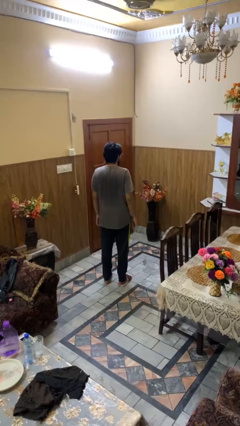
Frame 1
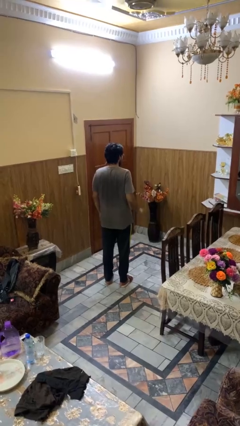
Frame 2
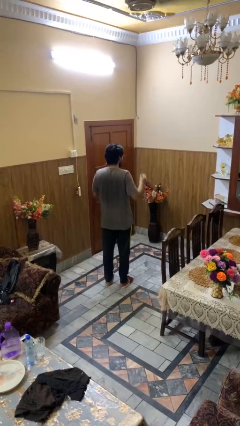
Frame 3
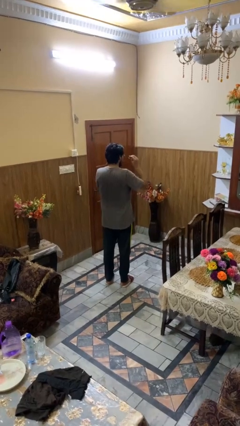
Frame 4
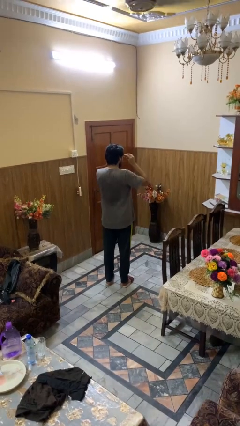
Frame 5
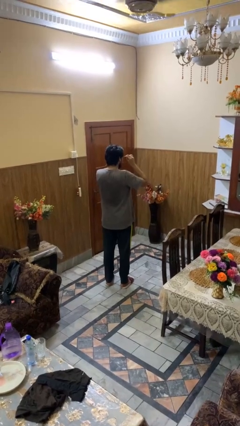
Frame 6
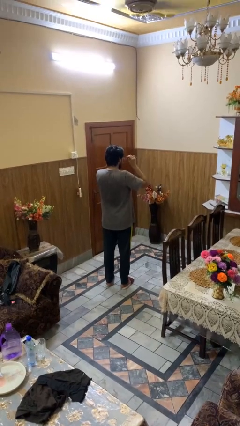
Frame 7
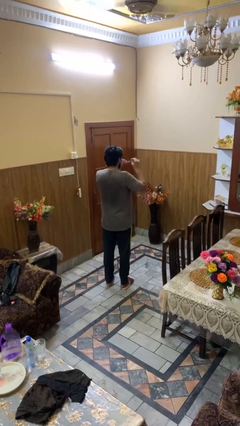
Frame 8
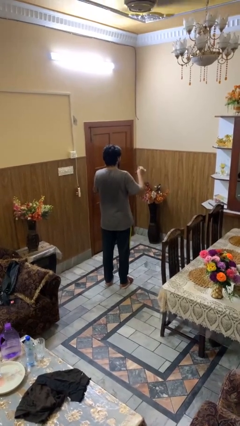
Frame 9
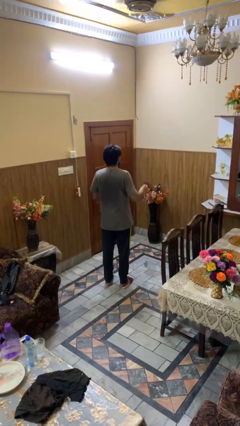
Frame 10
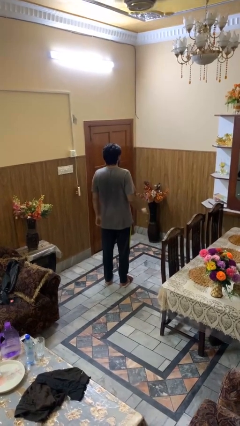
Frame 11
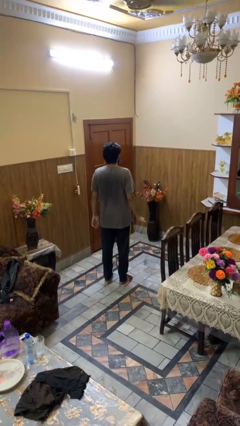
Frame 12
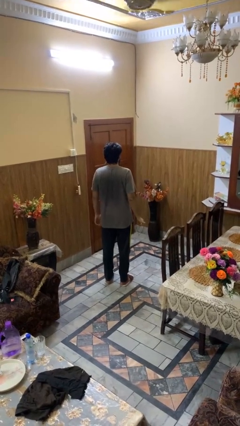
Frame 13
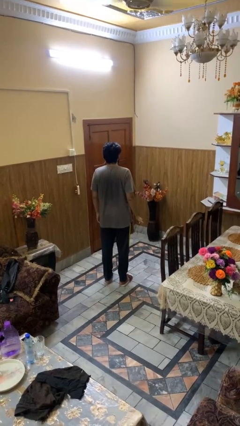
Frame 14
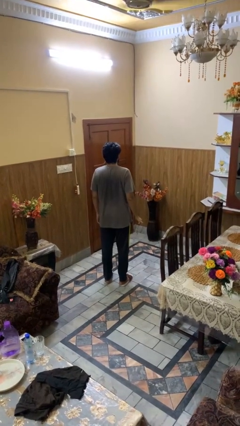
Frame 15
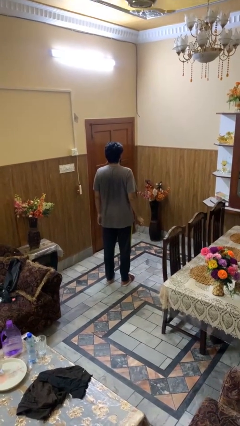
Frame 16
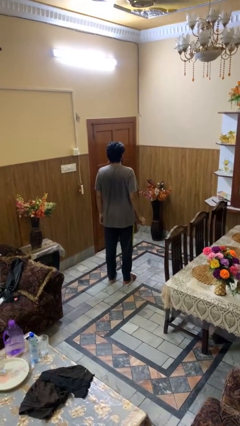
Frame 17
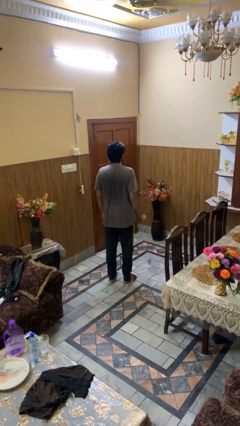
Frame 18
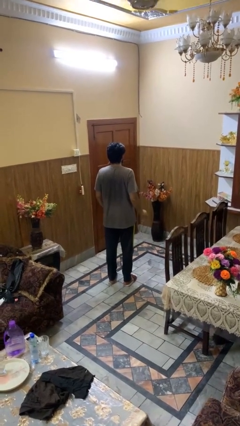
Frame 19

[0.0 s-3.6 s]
person takes off glasses

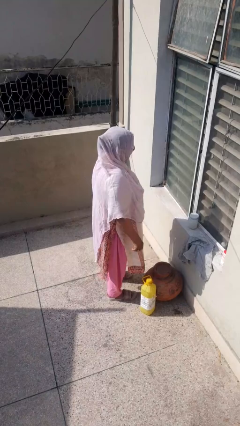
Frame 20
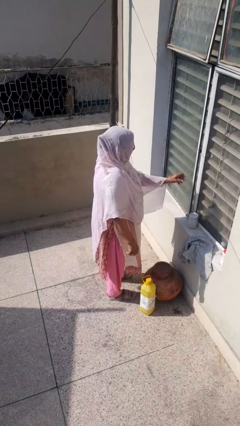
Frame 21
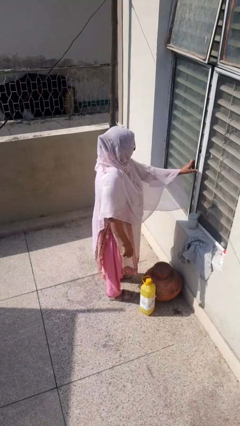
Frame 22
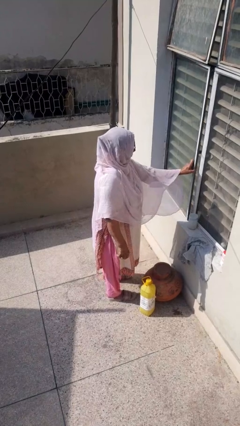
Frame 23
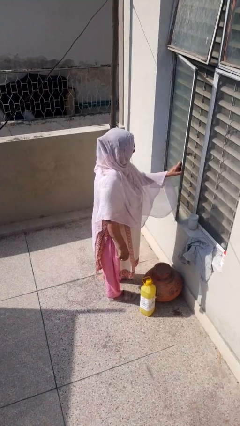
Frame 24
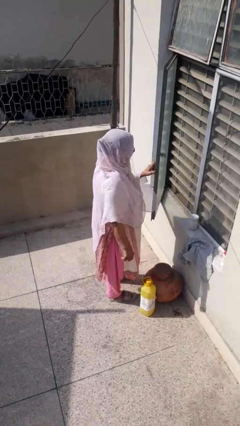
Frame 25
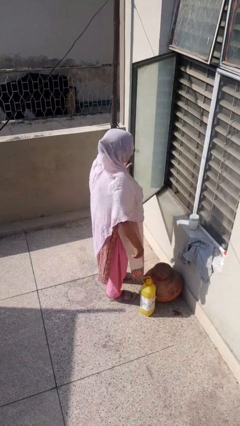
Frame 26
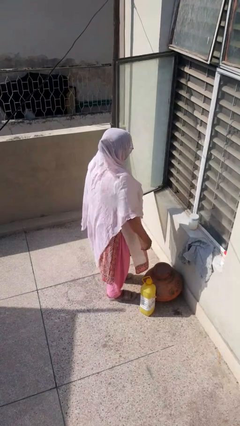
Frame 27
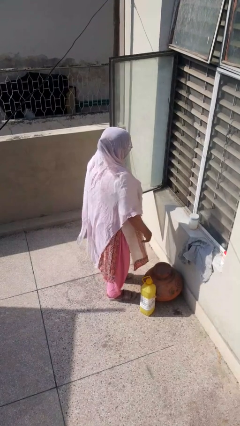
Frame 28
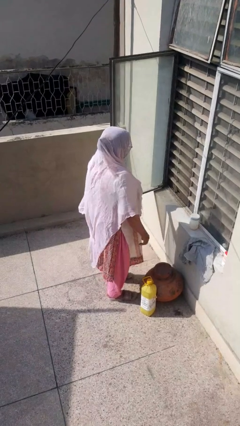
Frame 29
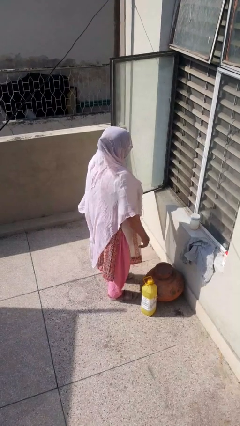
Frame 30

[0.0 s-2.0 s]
person opens home window

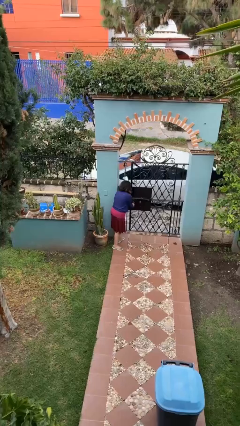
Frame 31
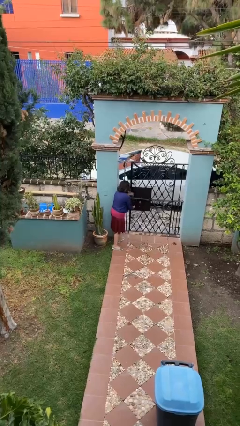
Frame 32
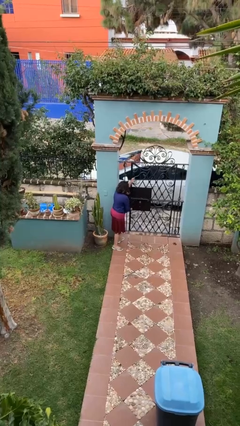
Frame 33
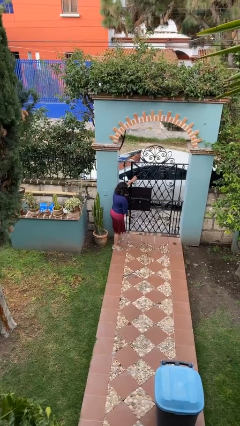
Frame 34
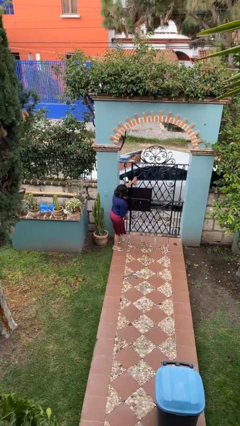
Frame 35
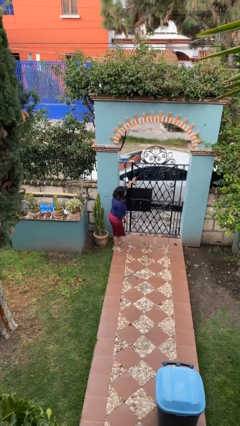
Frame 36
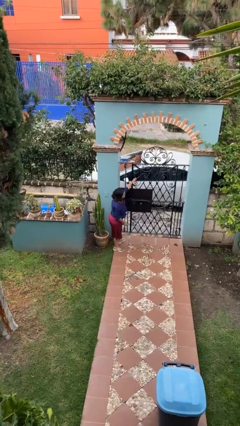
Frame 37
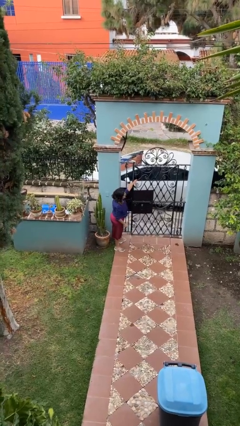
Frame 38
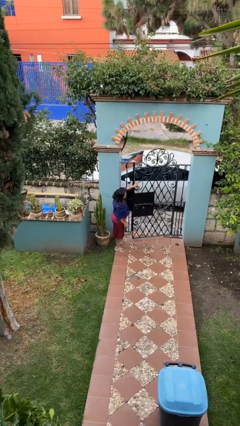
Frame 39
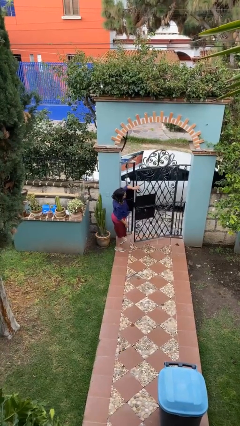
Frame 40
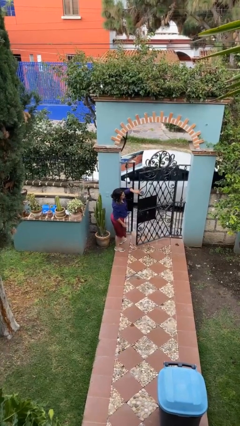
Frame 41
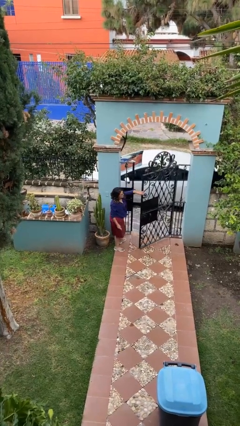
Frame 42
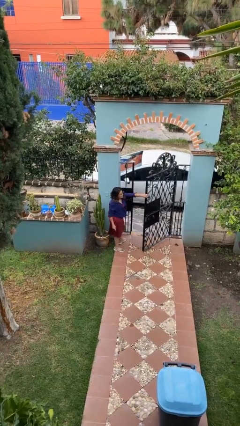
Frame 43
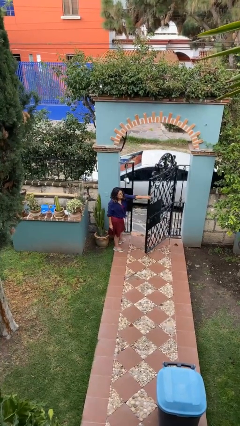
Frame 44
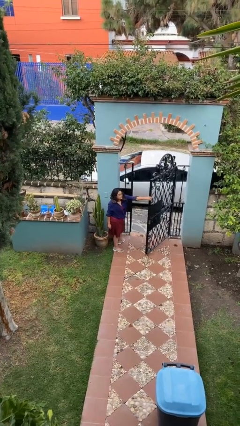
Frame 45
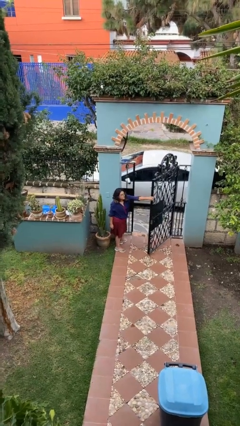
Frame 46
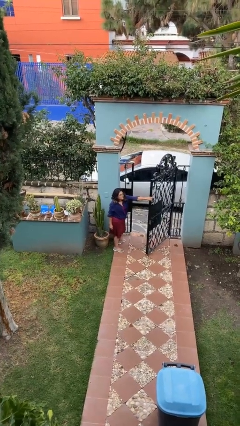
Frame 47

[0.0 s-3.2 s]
person opens facility door

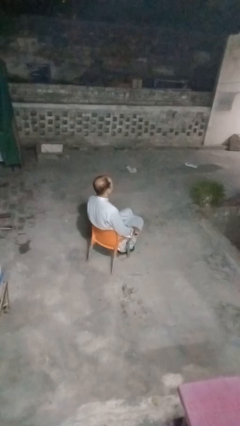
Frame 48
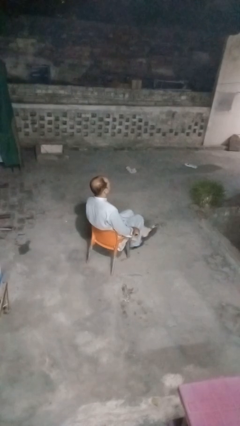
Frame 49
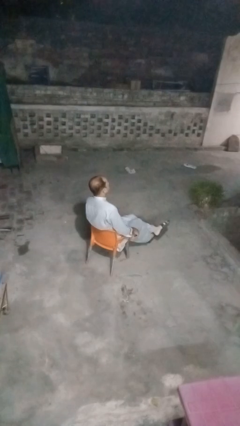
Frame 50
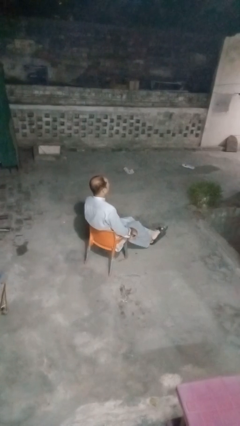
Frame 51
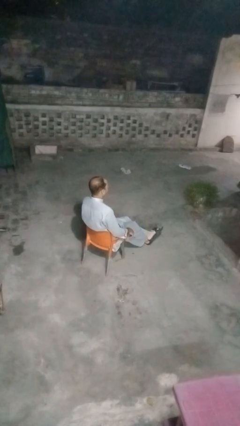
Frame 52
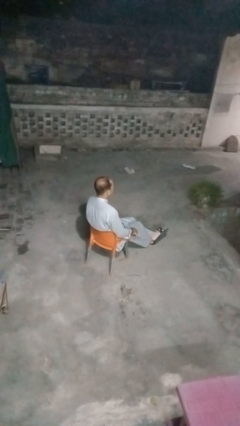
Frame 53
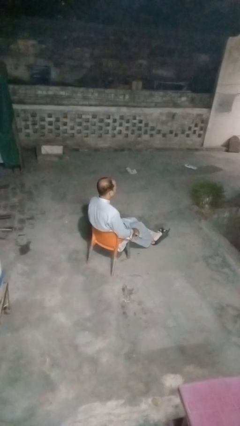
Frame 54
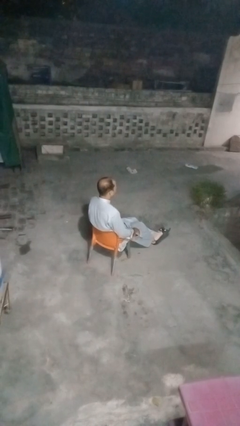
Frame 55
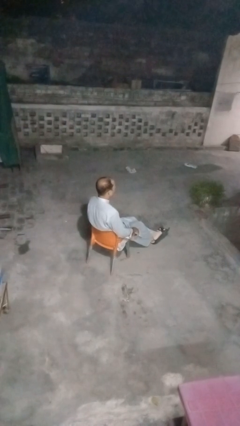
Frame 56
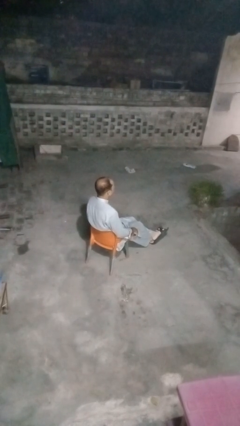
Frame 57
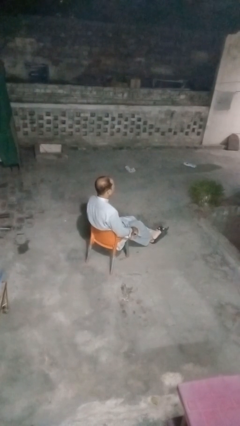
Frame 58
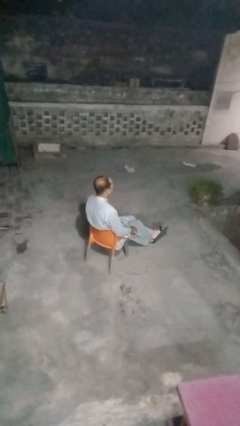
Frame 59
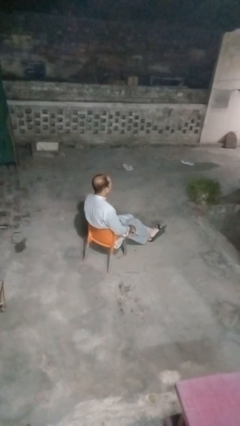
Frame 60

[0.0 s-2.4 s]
person crosses legs

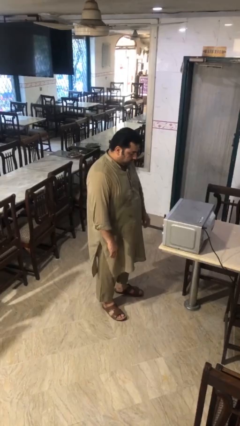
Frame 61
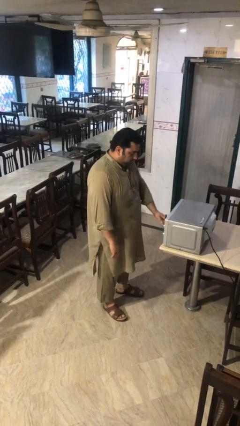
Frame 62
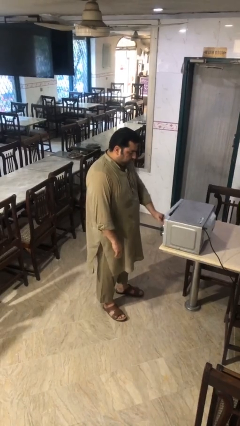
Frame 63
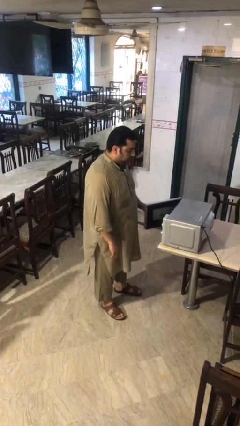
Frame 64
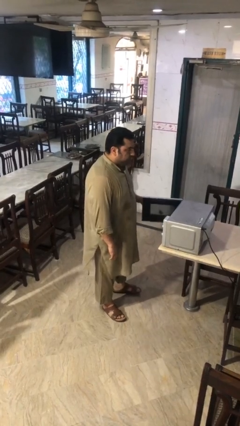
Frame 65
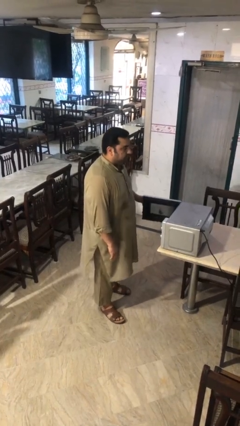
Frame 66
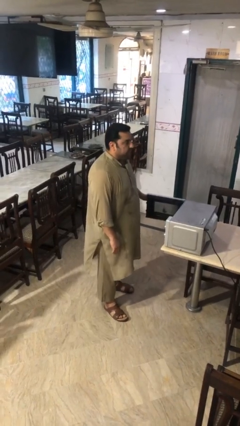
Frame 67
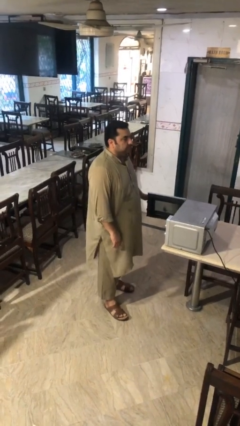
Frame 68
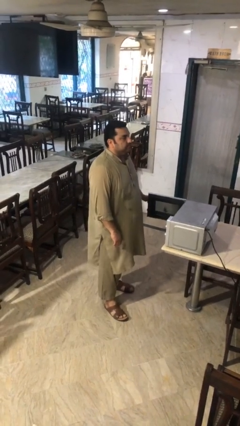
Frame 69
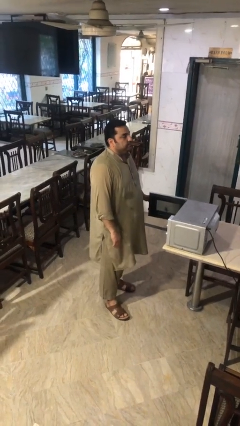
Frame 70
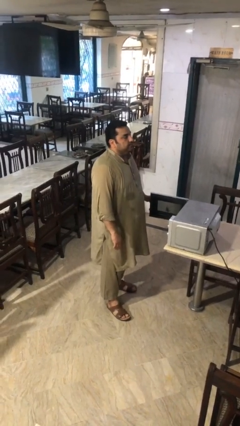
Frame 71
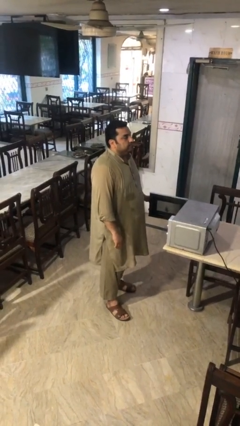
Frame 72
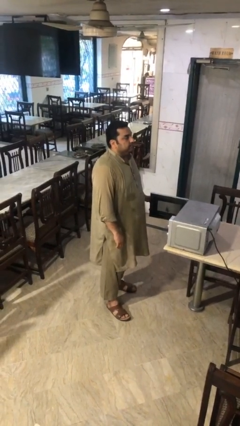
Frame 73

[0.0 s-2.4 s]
person opens microwave

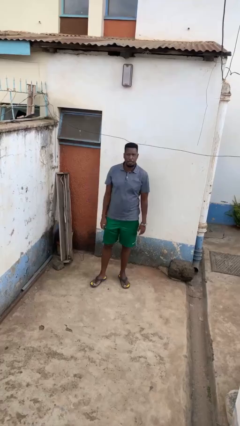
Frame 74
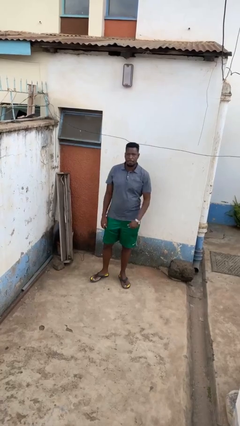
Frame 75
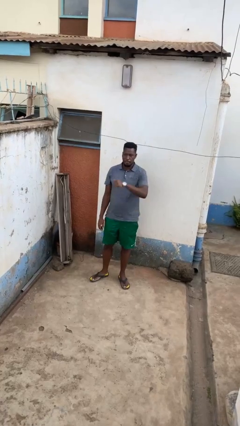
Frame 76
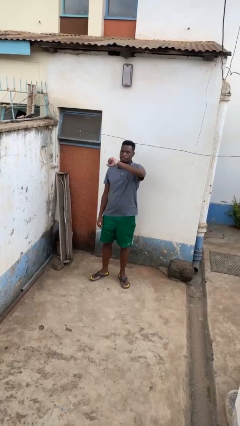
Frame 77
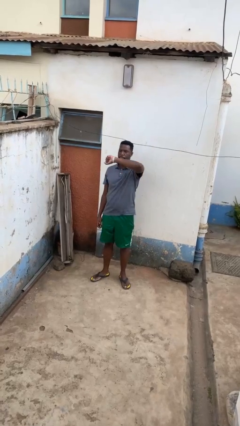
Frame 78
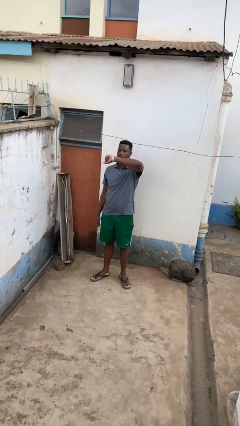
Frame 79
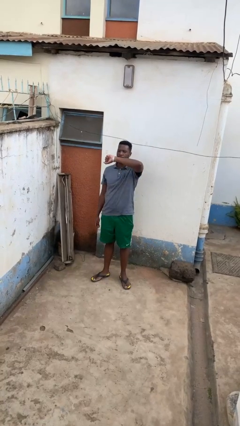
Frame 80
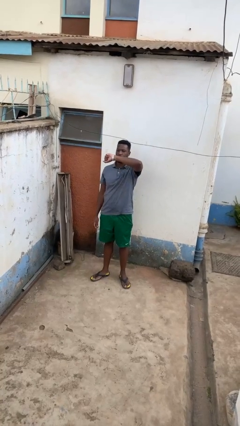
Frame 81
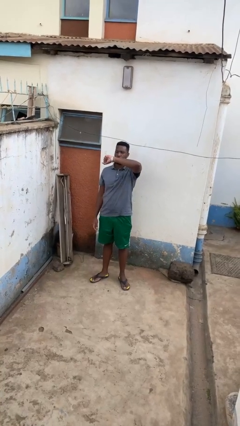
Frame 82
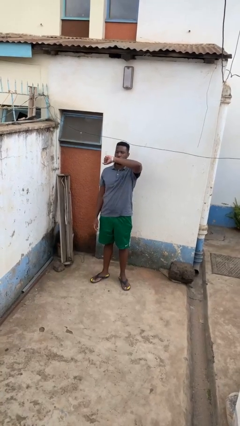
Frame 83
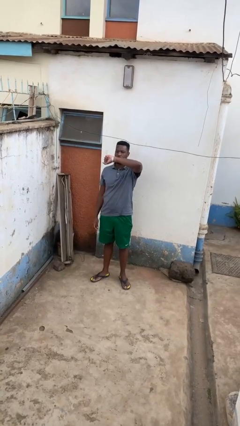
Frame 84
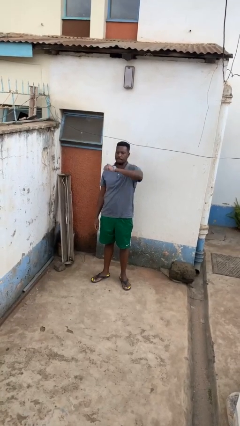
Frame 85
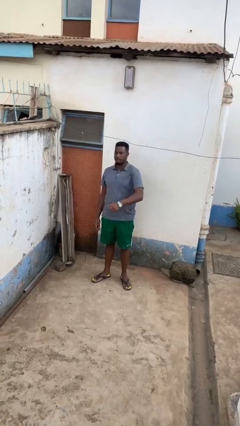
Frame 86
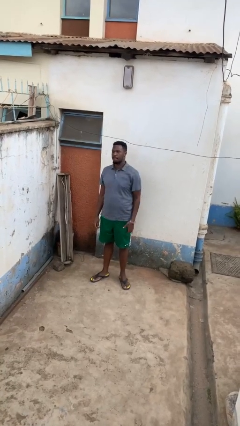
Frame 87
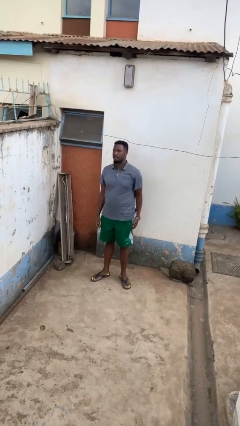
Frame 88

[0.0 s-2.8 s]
person looks at wristwatch

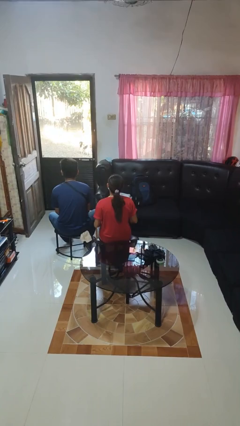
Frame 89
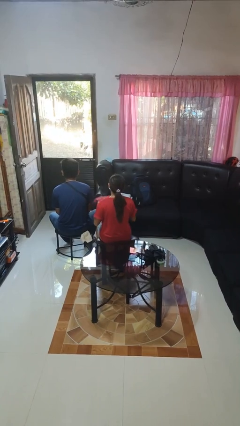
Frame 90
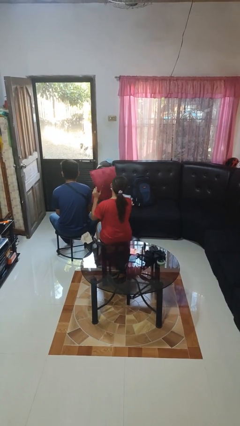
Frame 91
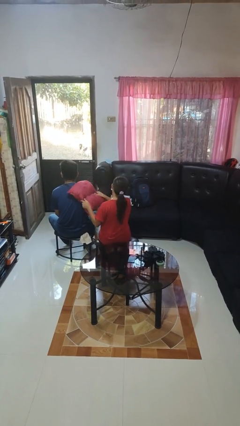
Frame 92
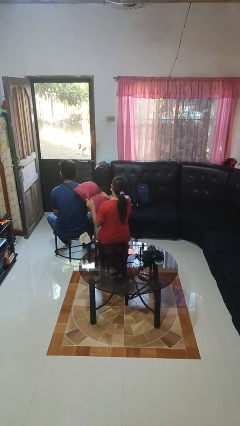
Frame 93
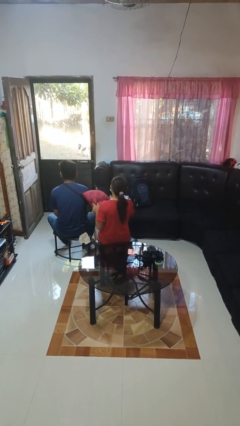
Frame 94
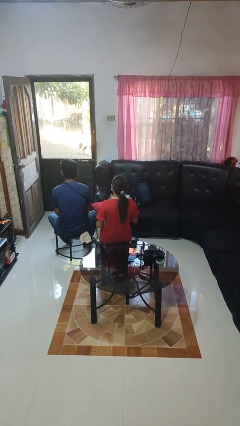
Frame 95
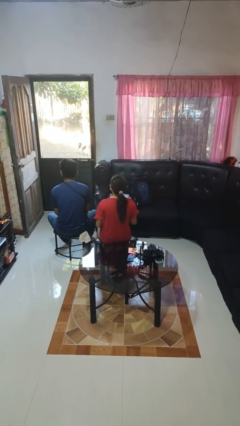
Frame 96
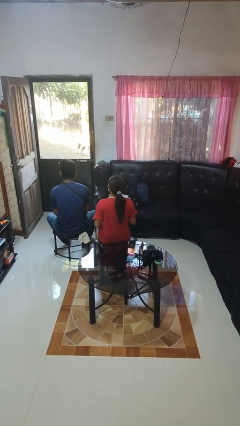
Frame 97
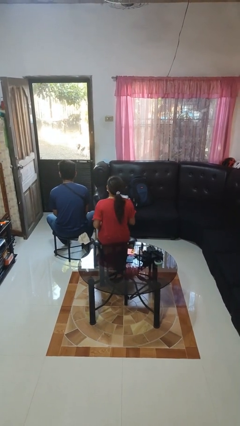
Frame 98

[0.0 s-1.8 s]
person hits person with pillow
